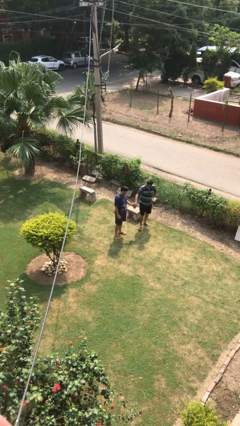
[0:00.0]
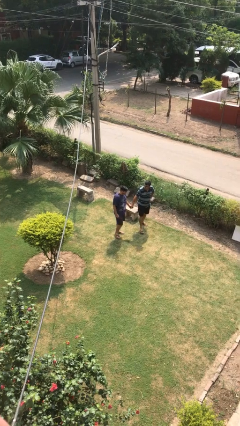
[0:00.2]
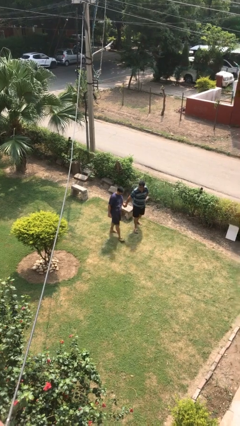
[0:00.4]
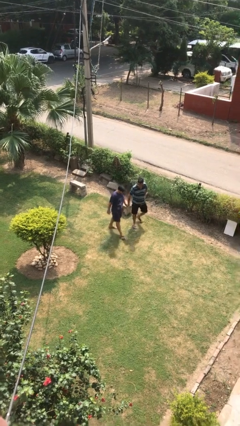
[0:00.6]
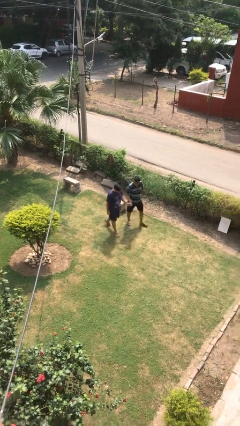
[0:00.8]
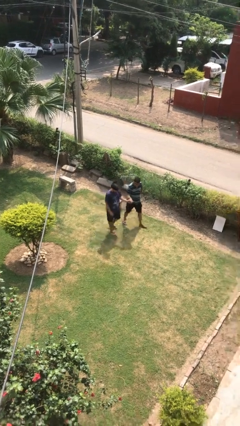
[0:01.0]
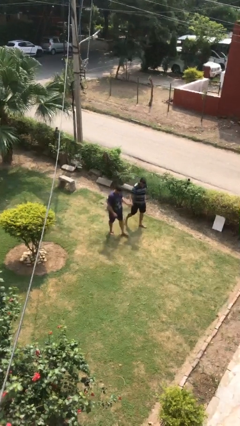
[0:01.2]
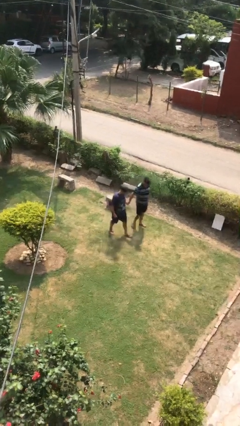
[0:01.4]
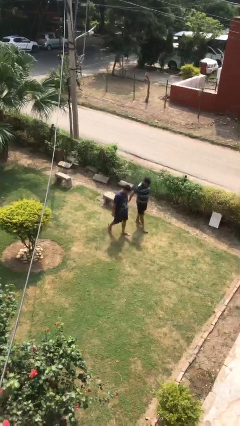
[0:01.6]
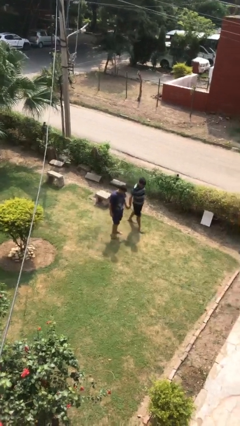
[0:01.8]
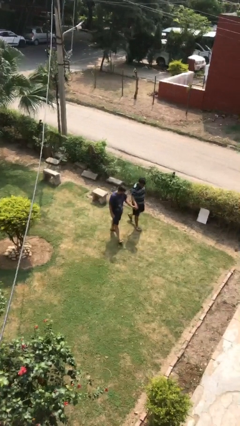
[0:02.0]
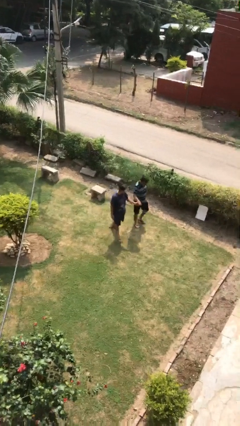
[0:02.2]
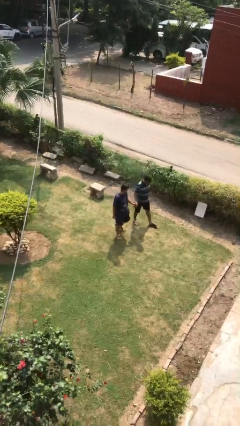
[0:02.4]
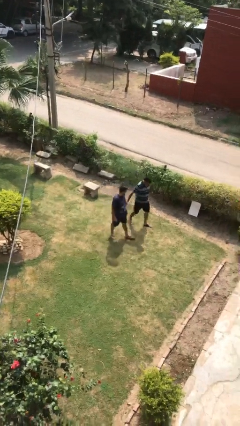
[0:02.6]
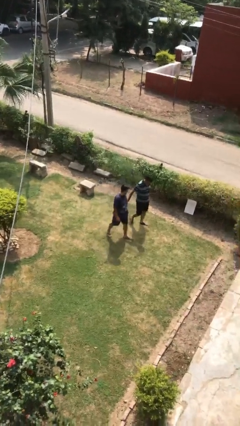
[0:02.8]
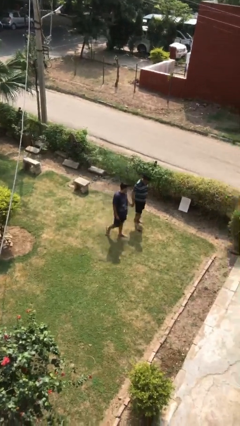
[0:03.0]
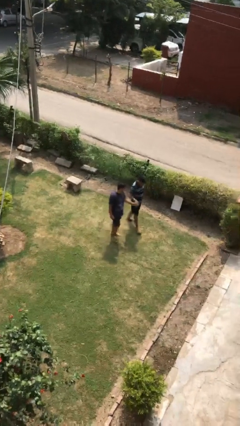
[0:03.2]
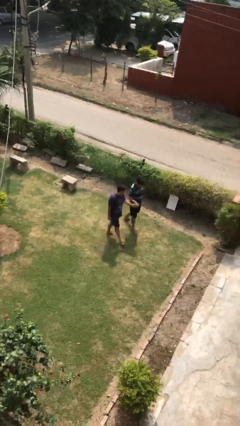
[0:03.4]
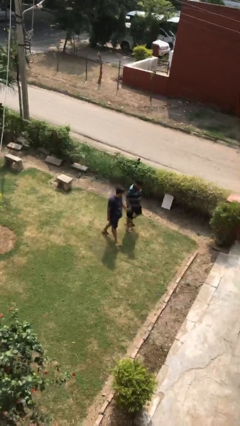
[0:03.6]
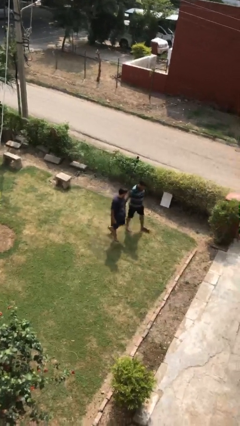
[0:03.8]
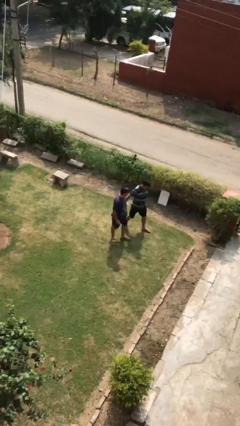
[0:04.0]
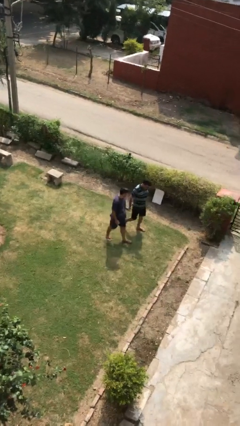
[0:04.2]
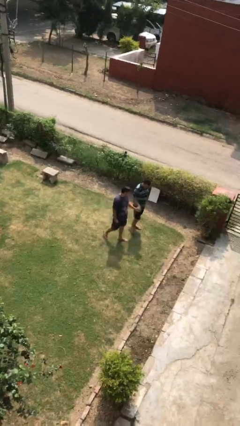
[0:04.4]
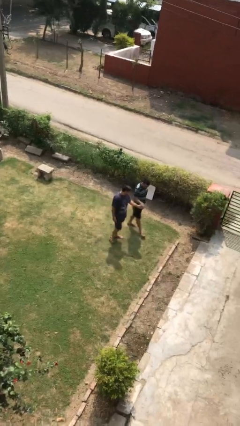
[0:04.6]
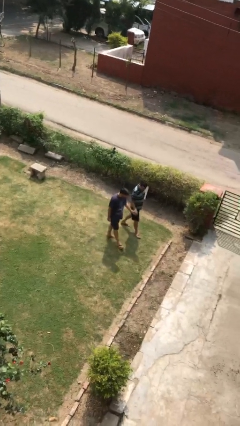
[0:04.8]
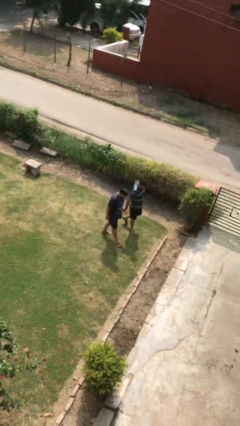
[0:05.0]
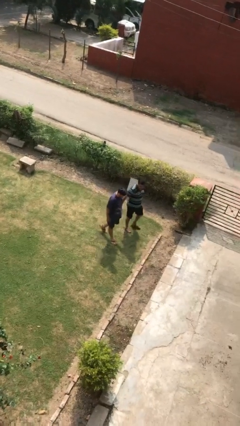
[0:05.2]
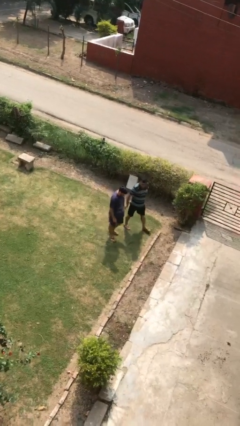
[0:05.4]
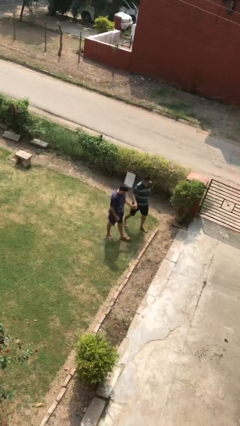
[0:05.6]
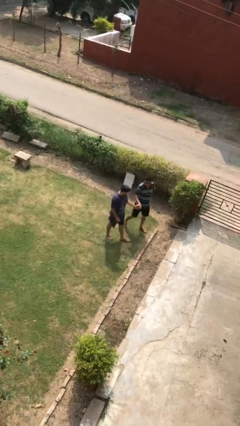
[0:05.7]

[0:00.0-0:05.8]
person holds hand

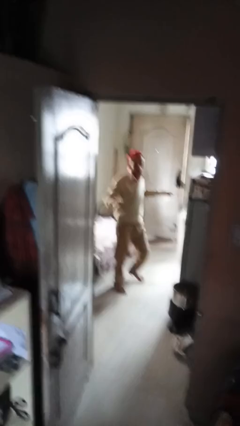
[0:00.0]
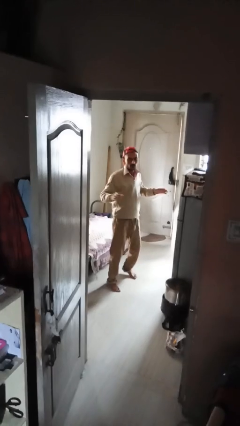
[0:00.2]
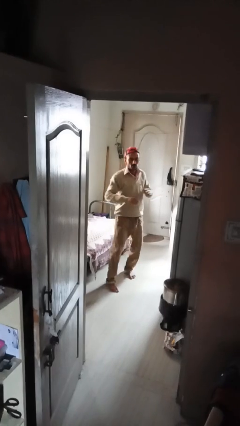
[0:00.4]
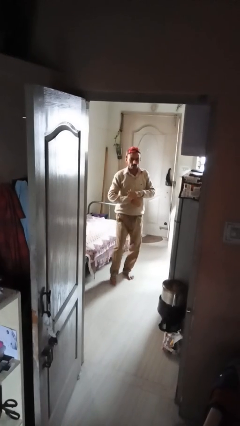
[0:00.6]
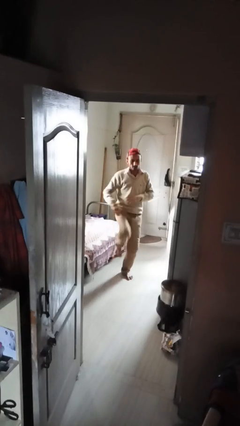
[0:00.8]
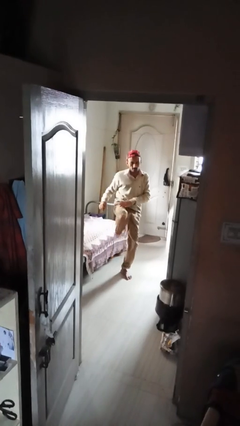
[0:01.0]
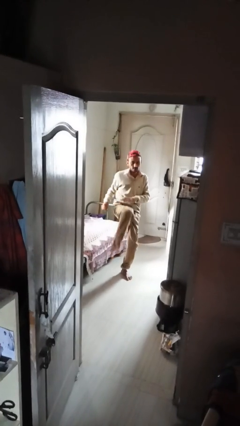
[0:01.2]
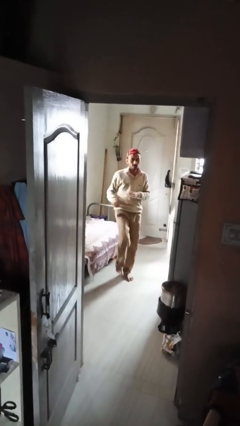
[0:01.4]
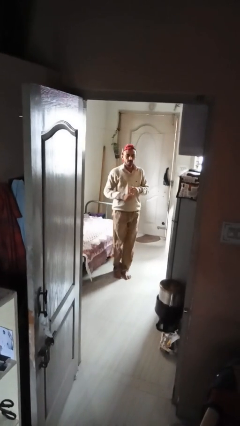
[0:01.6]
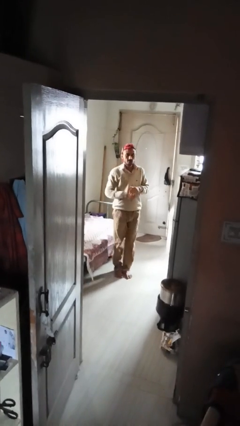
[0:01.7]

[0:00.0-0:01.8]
person karate kicks

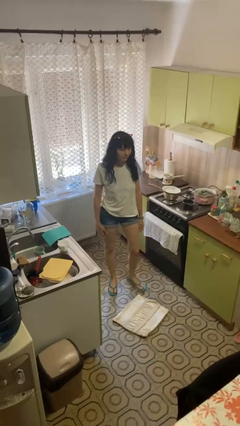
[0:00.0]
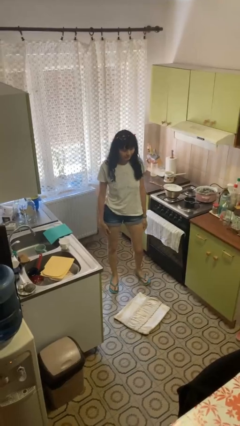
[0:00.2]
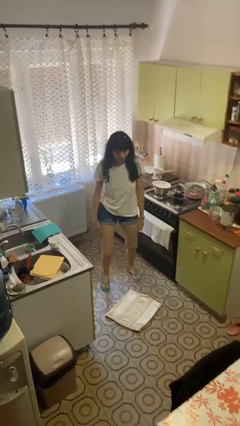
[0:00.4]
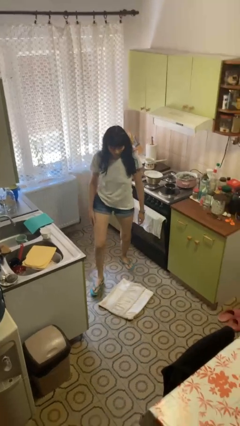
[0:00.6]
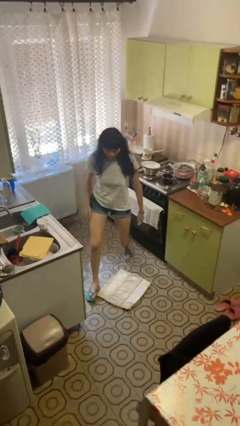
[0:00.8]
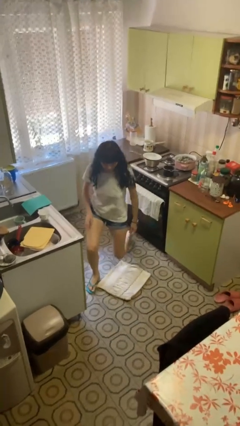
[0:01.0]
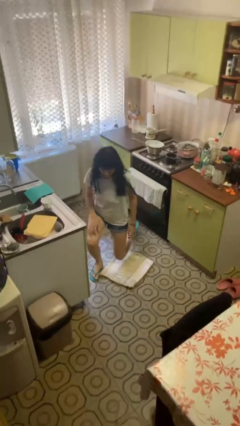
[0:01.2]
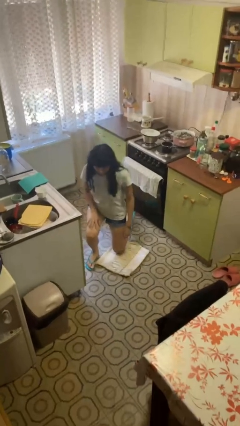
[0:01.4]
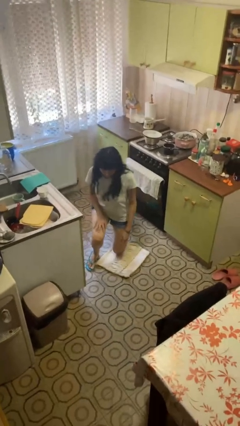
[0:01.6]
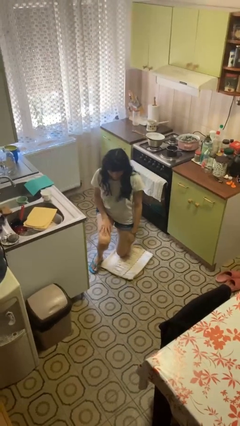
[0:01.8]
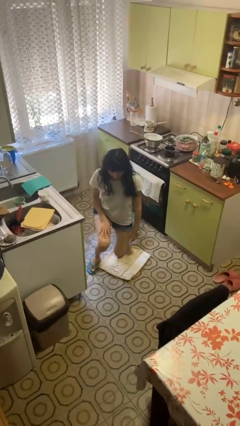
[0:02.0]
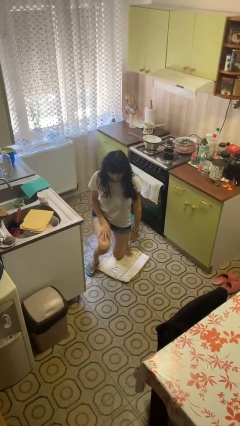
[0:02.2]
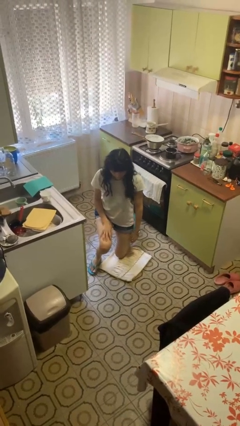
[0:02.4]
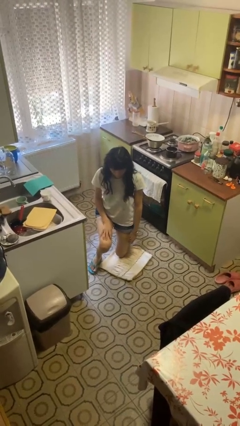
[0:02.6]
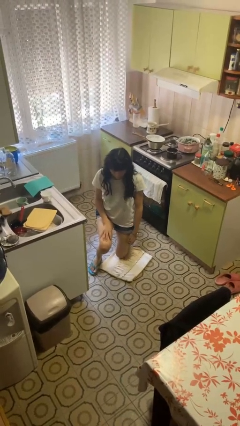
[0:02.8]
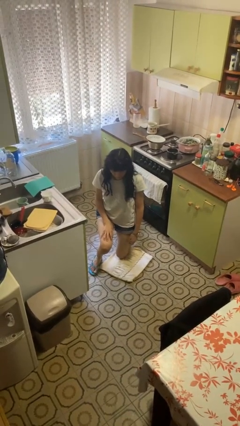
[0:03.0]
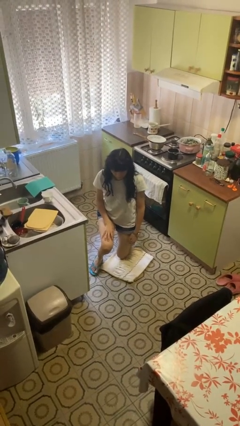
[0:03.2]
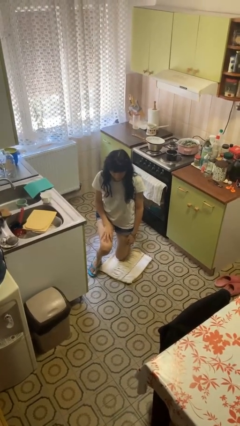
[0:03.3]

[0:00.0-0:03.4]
person kneels

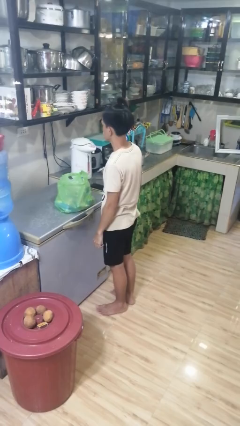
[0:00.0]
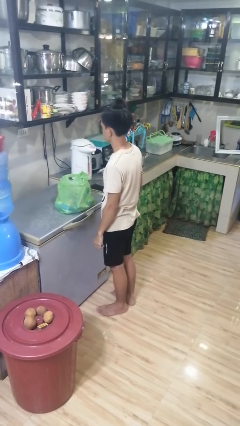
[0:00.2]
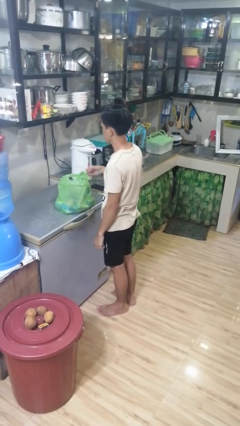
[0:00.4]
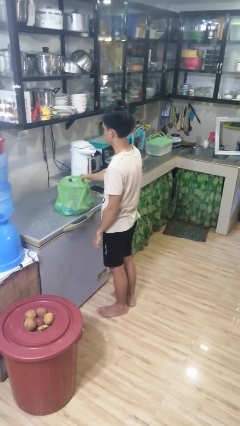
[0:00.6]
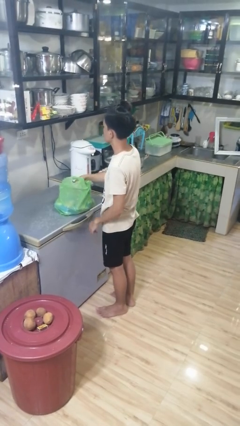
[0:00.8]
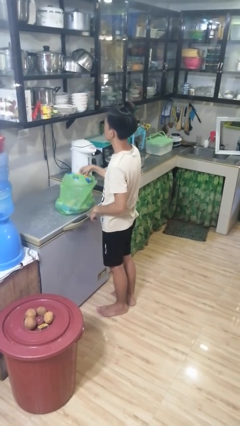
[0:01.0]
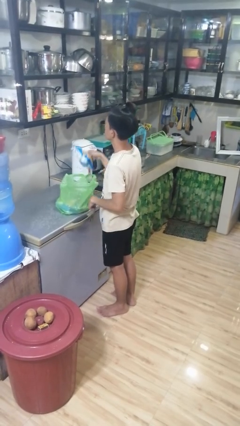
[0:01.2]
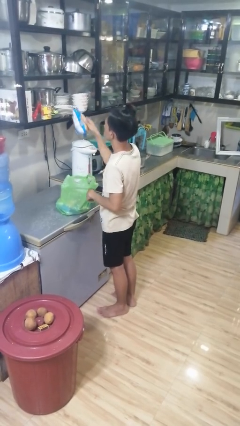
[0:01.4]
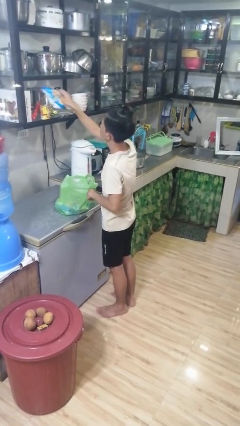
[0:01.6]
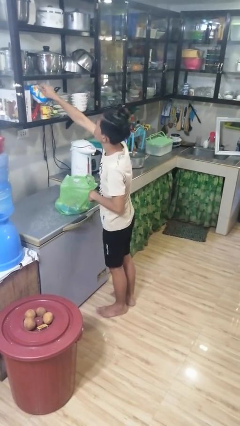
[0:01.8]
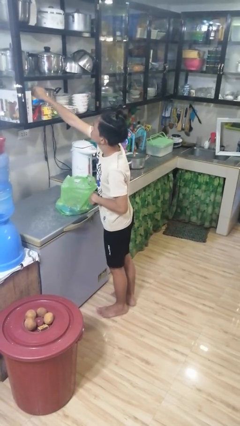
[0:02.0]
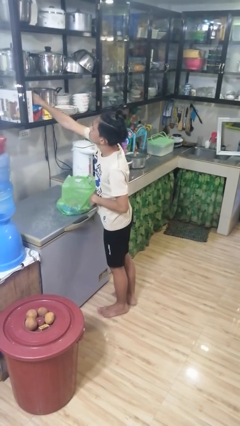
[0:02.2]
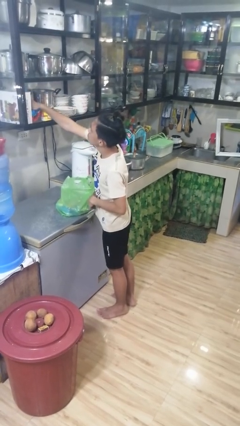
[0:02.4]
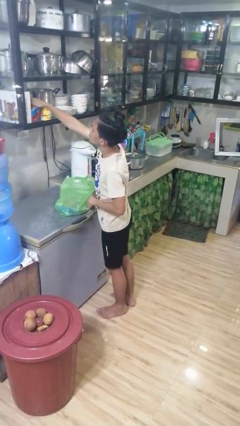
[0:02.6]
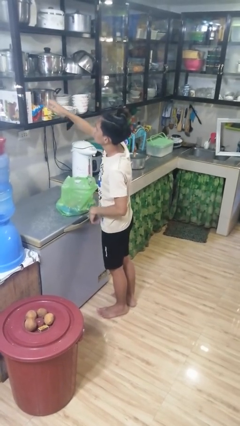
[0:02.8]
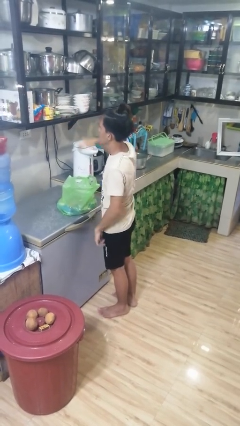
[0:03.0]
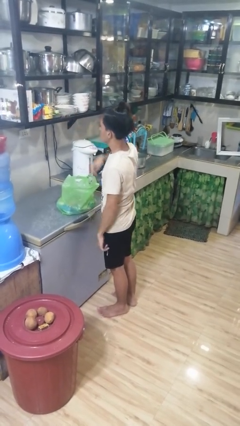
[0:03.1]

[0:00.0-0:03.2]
person loads groceries into cabinet

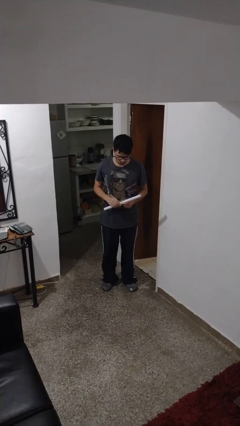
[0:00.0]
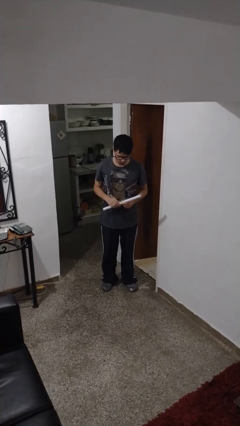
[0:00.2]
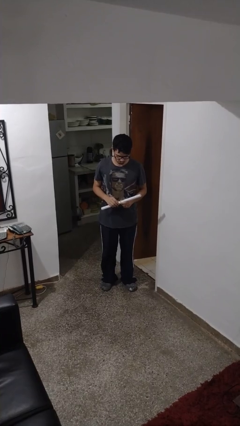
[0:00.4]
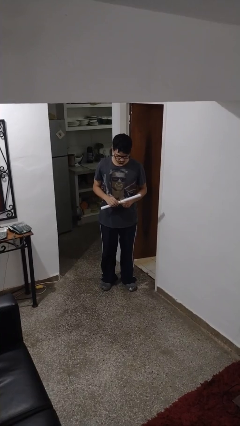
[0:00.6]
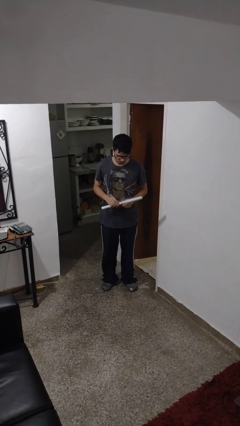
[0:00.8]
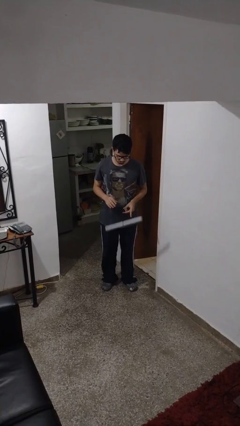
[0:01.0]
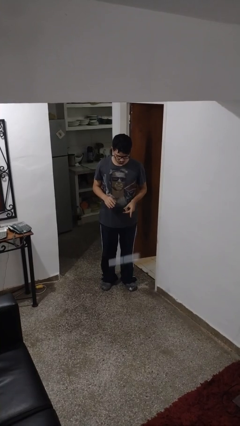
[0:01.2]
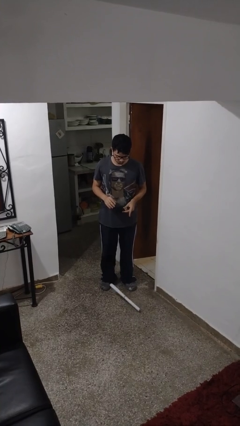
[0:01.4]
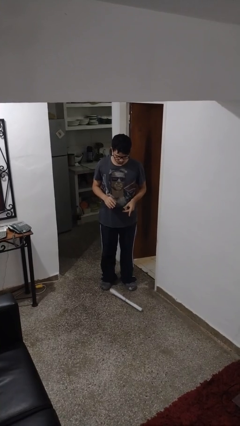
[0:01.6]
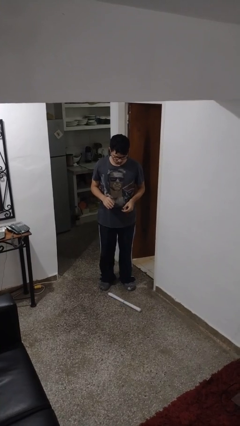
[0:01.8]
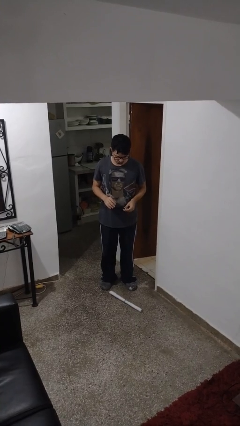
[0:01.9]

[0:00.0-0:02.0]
person drops object

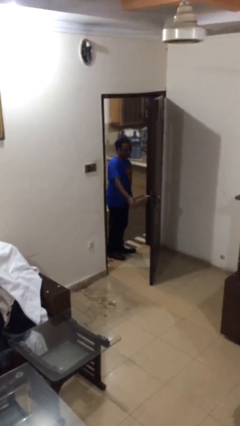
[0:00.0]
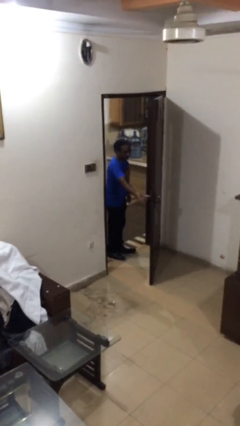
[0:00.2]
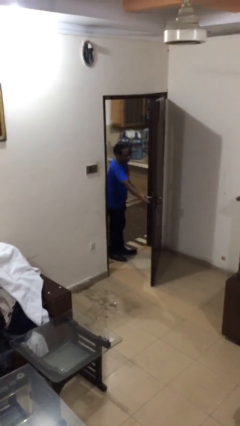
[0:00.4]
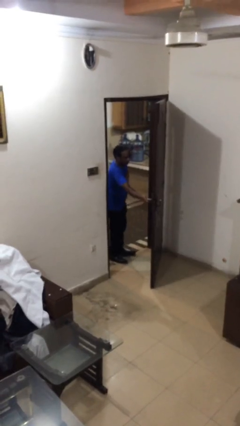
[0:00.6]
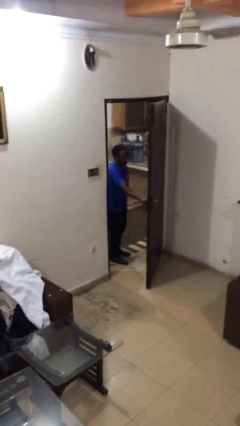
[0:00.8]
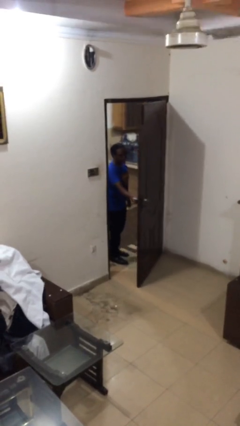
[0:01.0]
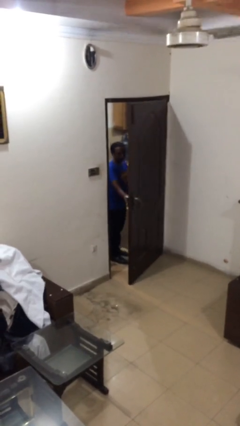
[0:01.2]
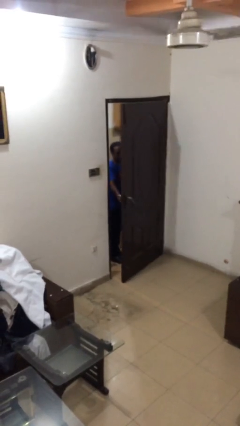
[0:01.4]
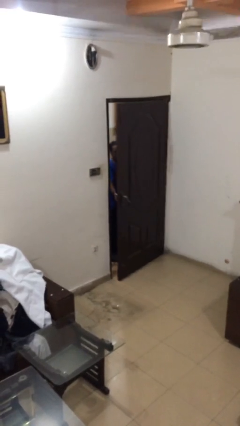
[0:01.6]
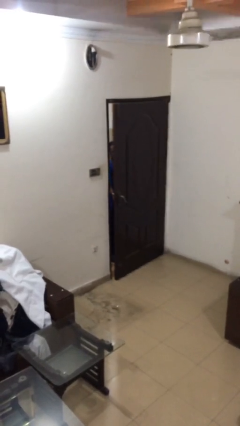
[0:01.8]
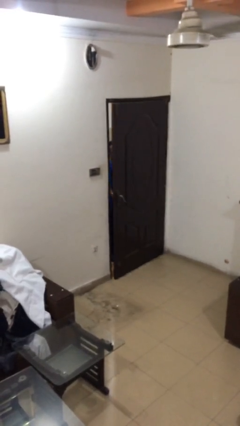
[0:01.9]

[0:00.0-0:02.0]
person closes facility door
